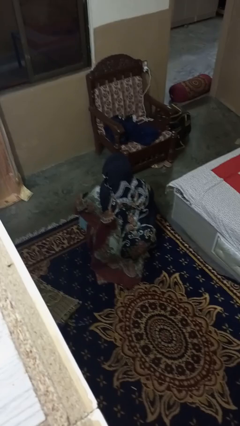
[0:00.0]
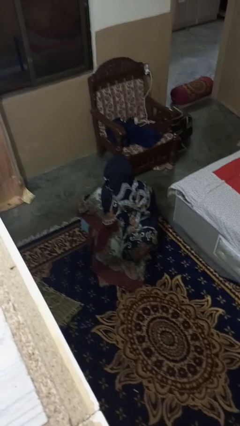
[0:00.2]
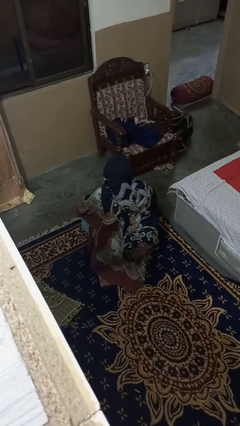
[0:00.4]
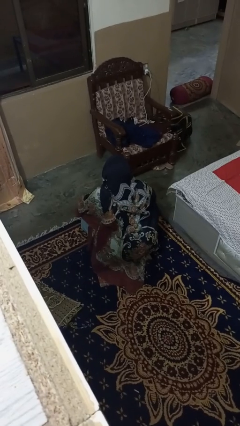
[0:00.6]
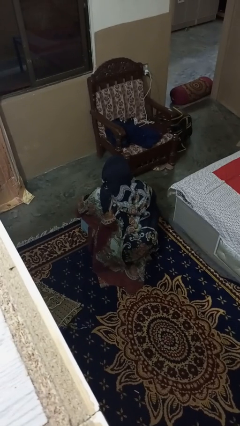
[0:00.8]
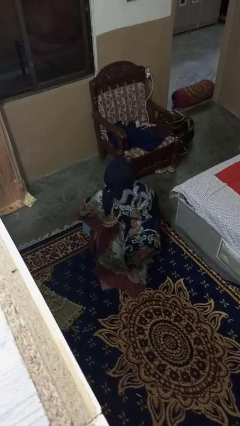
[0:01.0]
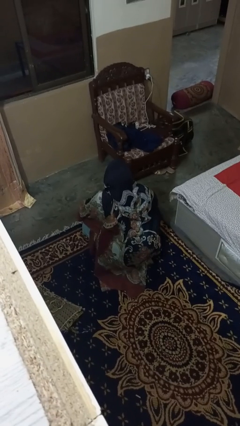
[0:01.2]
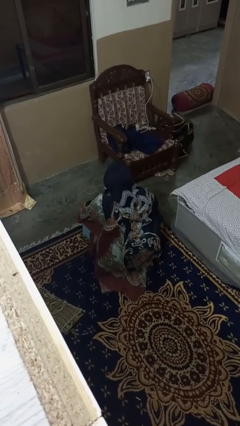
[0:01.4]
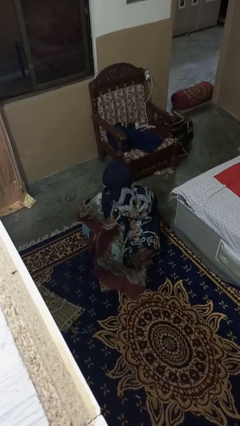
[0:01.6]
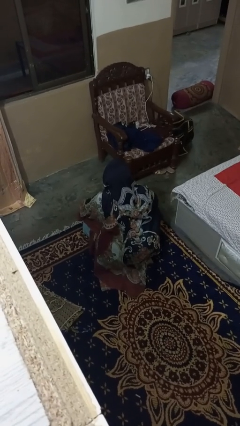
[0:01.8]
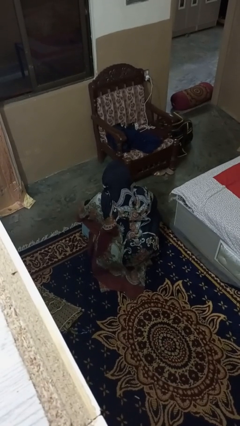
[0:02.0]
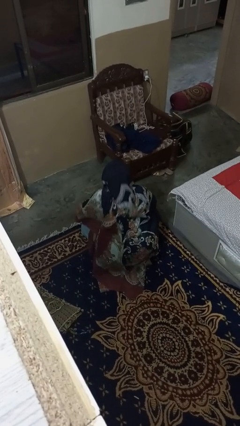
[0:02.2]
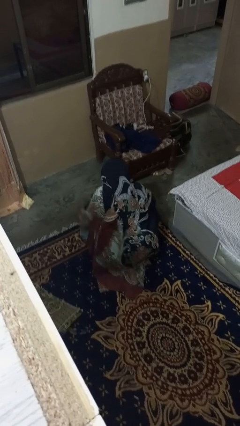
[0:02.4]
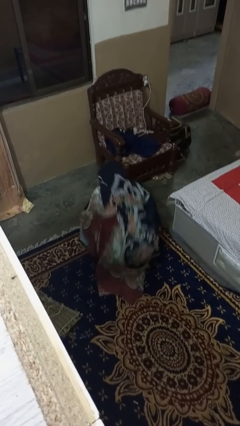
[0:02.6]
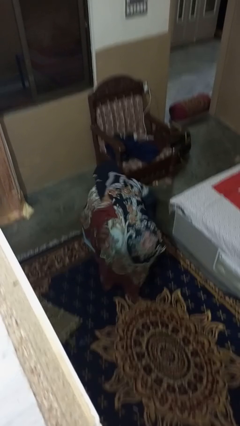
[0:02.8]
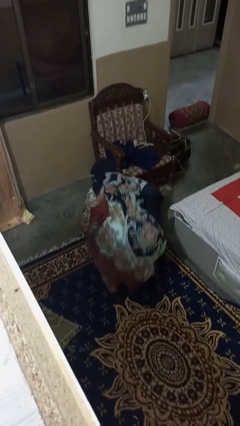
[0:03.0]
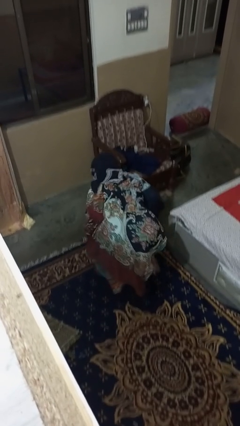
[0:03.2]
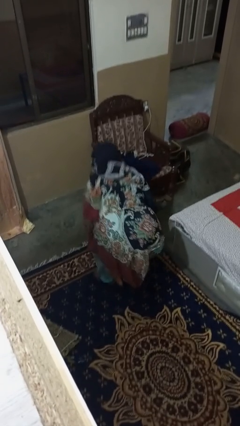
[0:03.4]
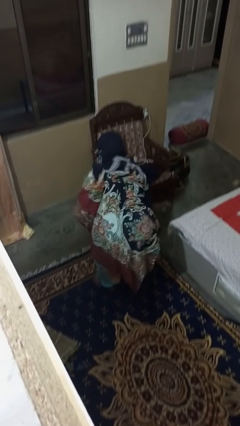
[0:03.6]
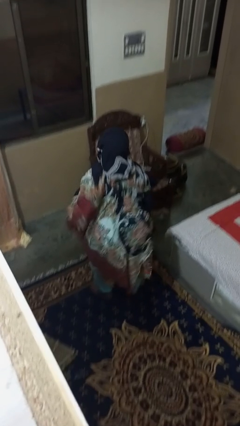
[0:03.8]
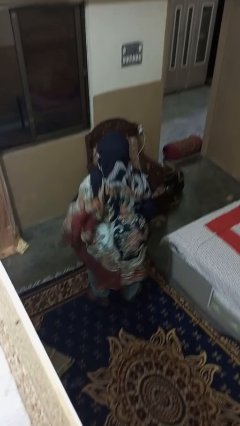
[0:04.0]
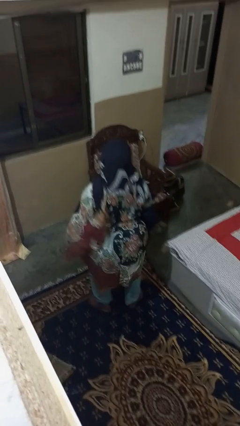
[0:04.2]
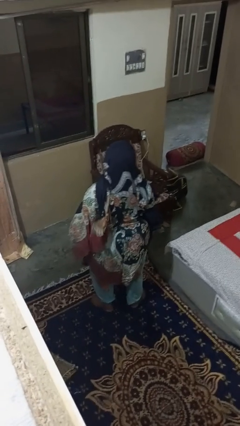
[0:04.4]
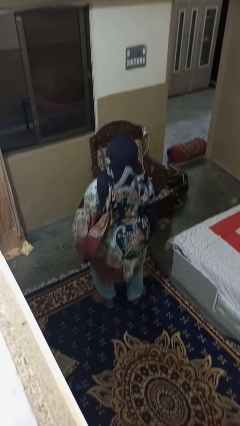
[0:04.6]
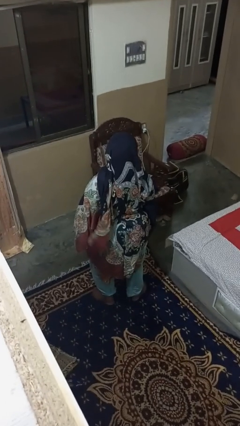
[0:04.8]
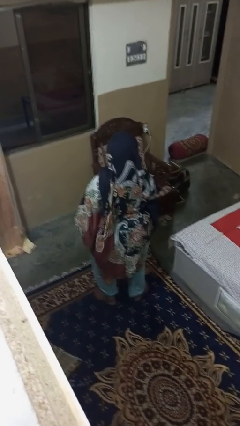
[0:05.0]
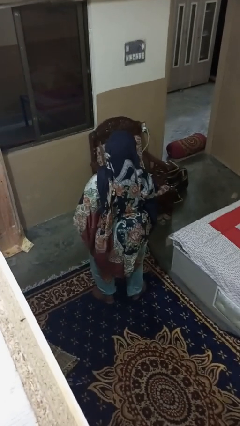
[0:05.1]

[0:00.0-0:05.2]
person stands up

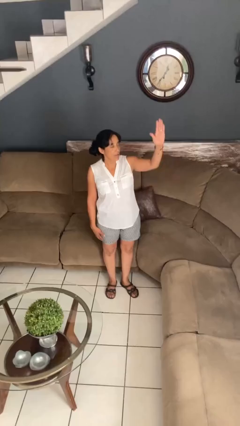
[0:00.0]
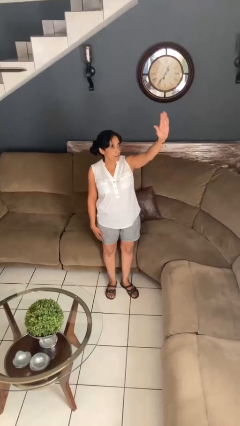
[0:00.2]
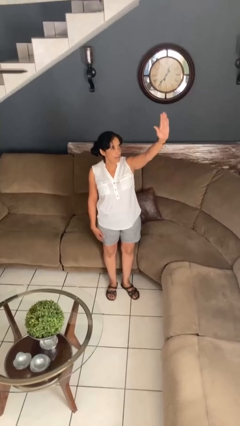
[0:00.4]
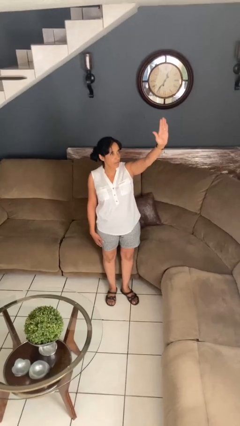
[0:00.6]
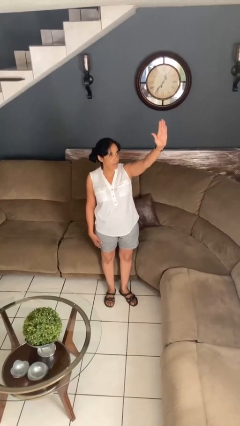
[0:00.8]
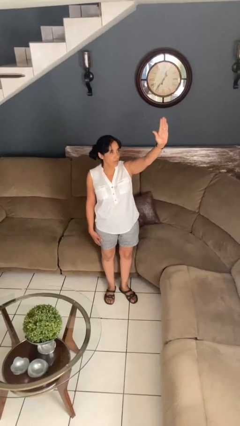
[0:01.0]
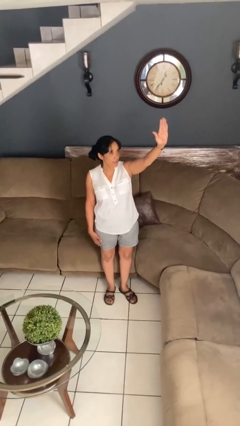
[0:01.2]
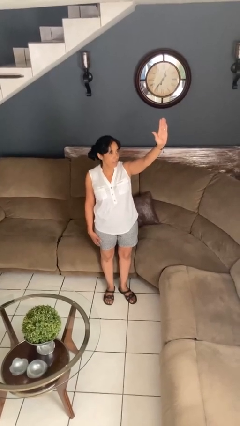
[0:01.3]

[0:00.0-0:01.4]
person gestures stop

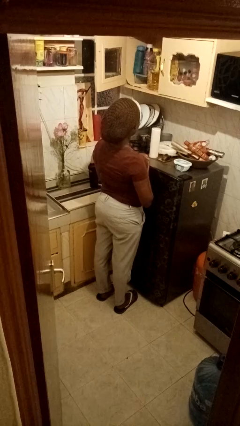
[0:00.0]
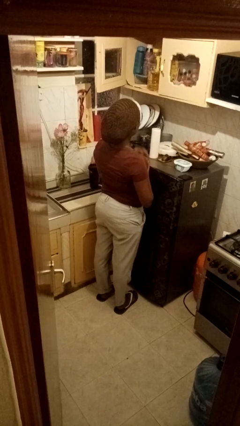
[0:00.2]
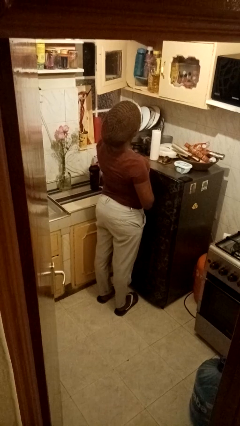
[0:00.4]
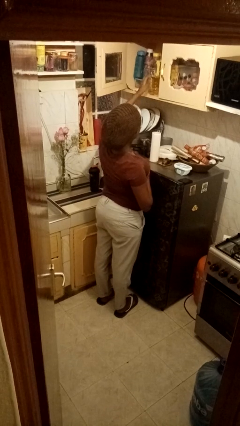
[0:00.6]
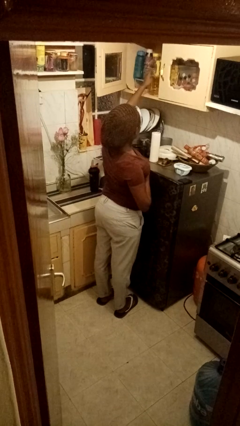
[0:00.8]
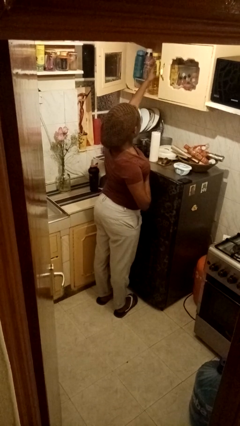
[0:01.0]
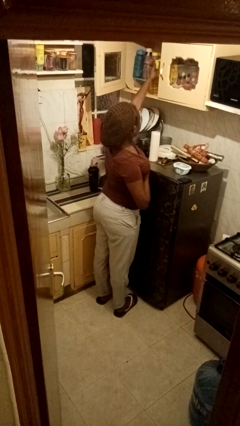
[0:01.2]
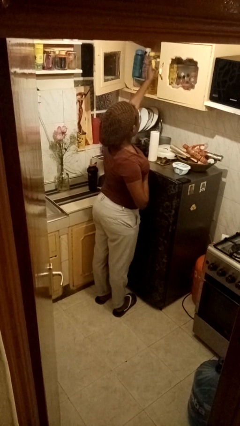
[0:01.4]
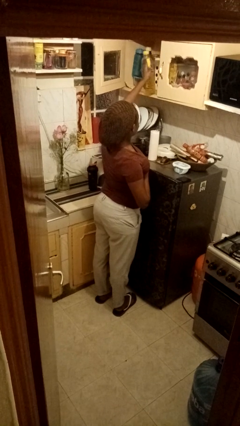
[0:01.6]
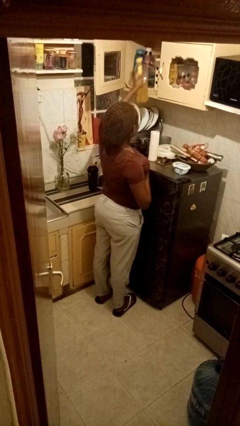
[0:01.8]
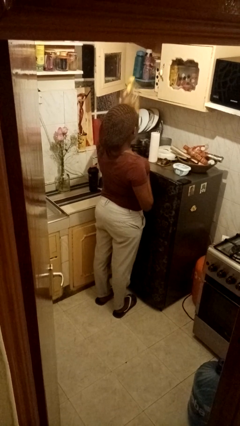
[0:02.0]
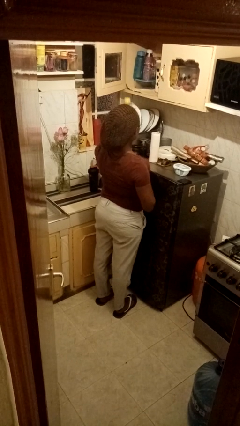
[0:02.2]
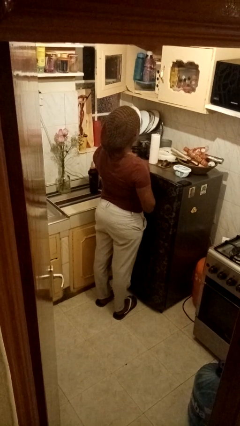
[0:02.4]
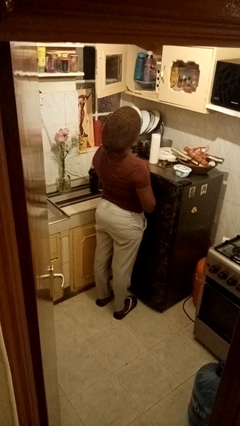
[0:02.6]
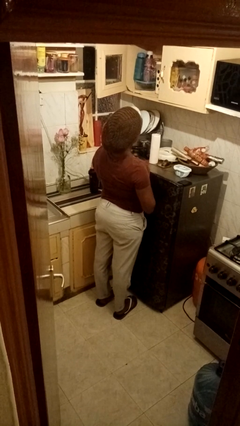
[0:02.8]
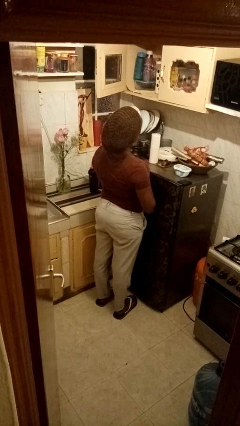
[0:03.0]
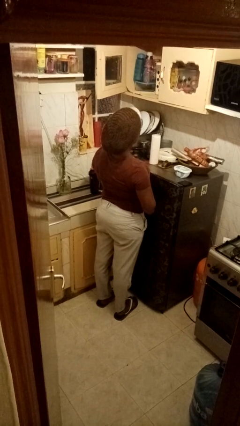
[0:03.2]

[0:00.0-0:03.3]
person picks up object from shelf

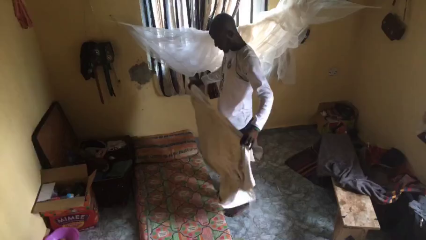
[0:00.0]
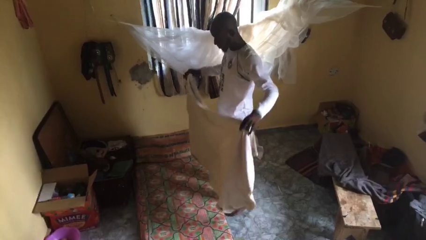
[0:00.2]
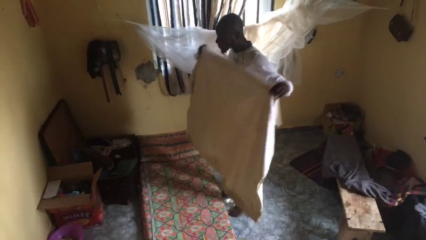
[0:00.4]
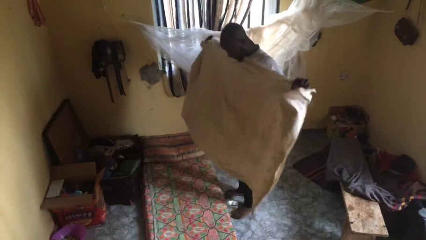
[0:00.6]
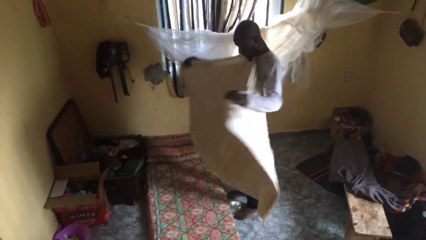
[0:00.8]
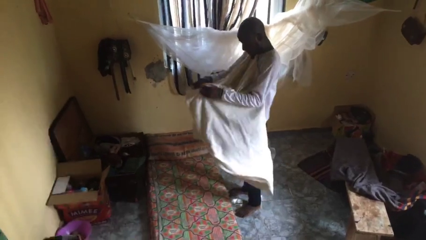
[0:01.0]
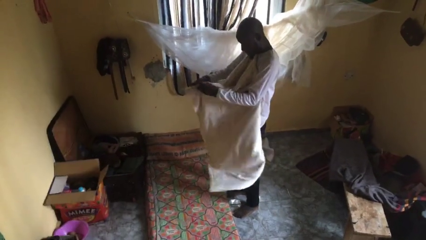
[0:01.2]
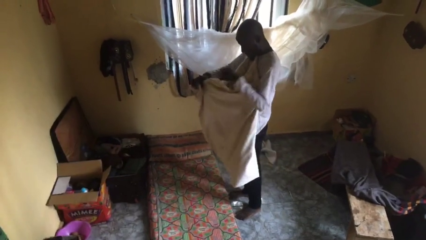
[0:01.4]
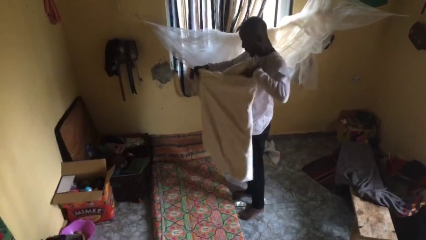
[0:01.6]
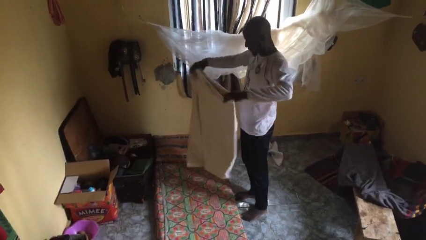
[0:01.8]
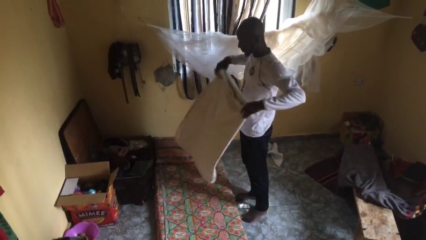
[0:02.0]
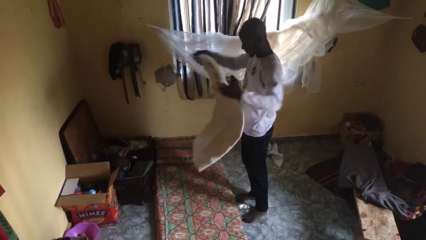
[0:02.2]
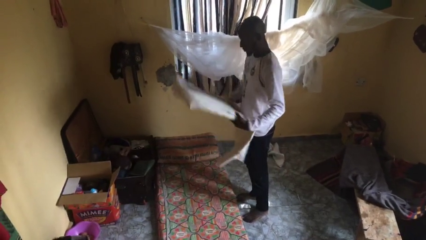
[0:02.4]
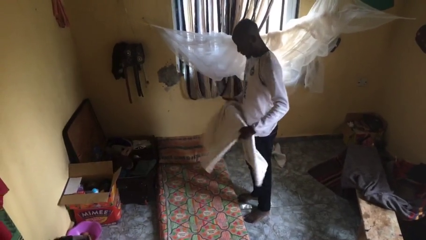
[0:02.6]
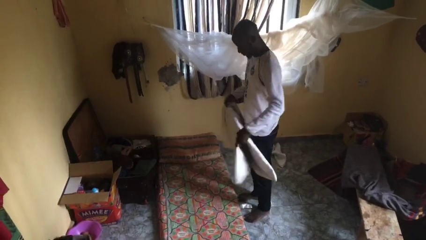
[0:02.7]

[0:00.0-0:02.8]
person folds blanket

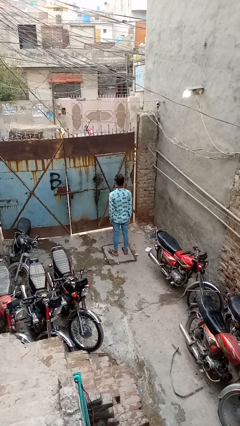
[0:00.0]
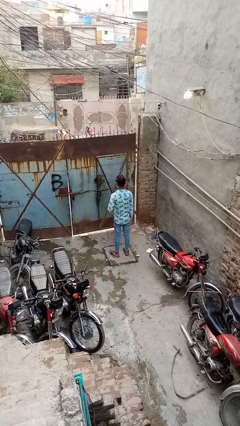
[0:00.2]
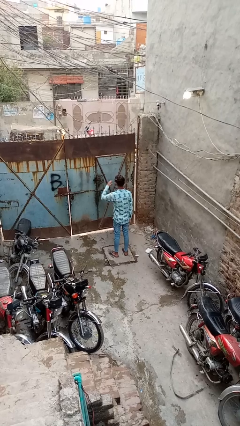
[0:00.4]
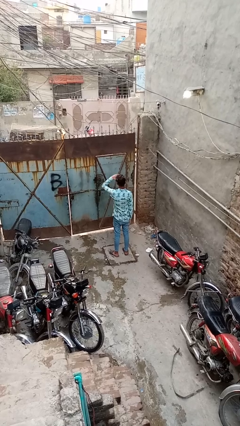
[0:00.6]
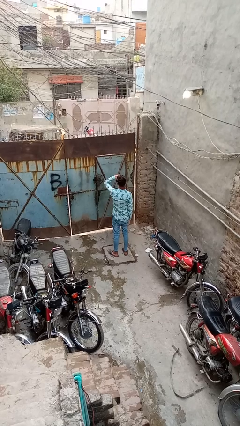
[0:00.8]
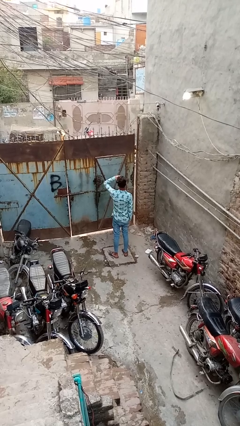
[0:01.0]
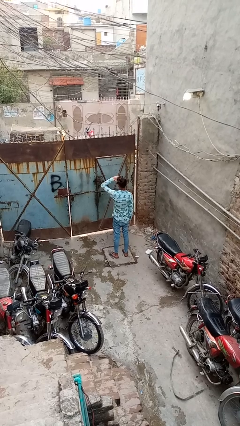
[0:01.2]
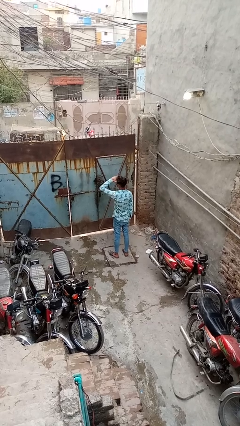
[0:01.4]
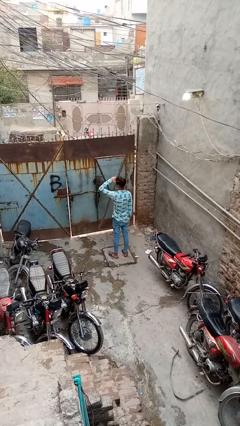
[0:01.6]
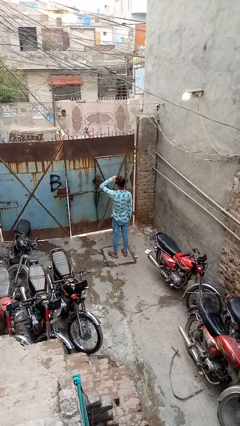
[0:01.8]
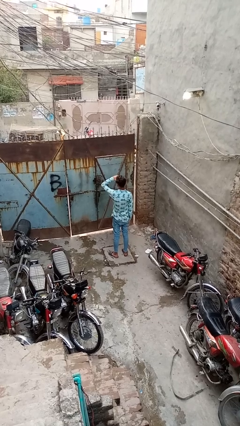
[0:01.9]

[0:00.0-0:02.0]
person shades eyes

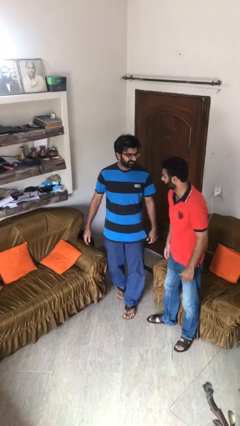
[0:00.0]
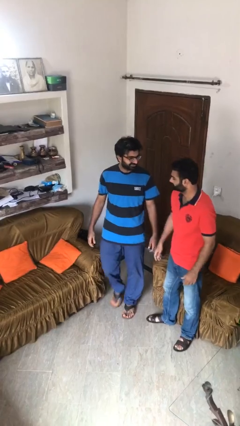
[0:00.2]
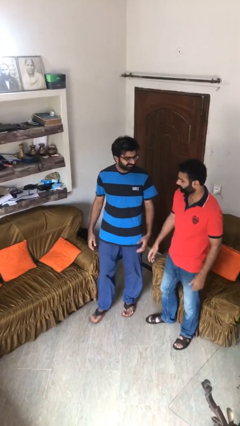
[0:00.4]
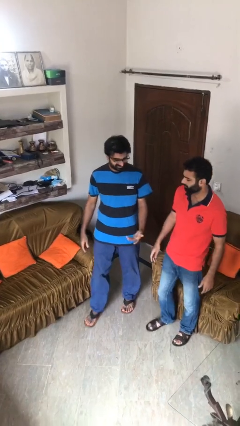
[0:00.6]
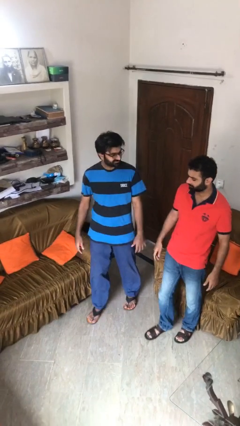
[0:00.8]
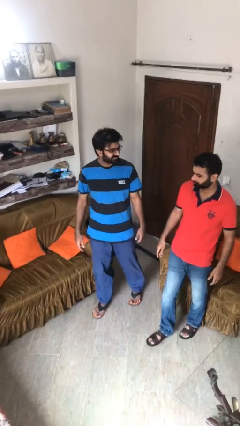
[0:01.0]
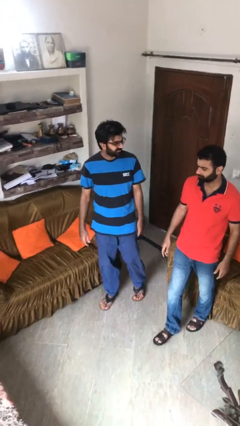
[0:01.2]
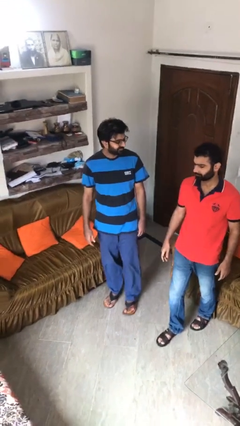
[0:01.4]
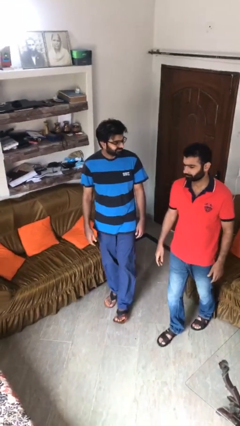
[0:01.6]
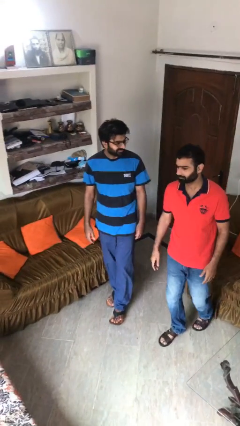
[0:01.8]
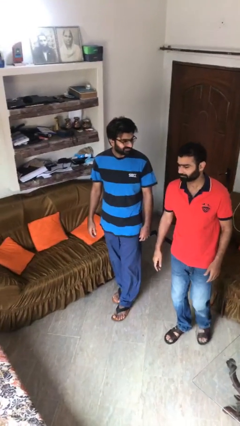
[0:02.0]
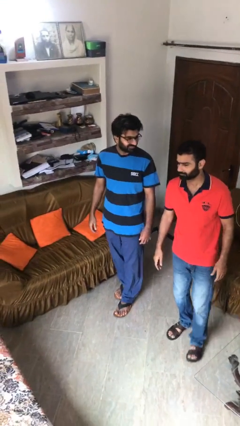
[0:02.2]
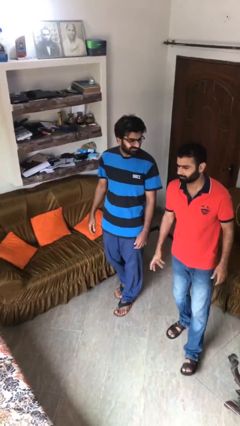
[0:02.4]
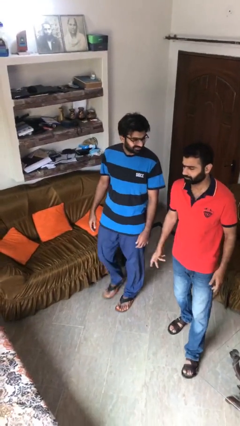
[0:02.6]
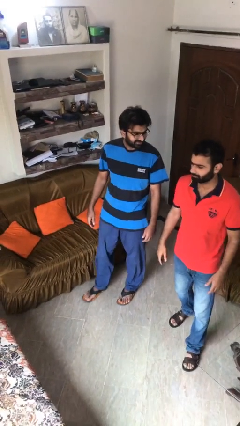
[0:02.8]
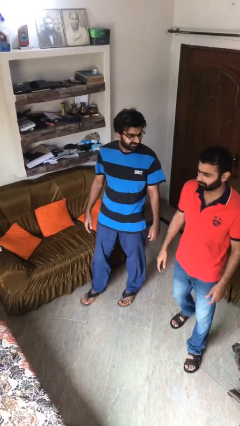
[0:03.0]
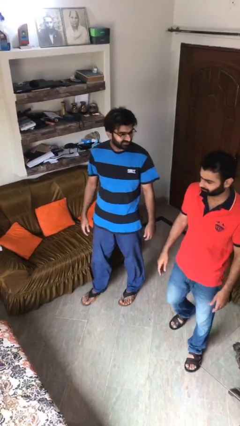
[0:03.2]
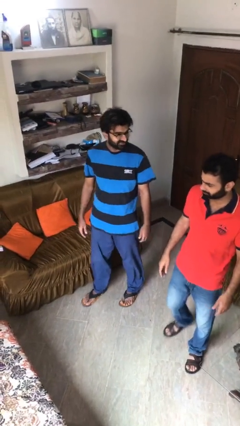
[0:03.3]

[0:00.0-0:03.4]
person talks to person
